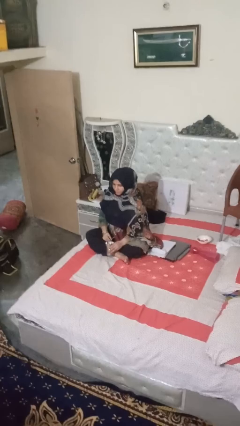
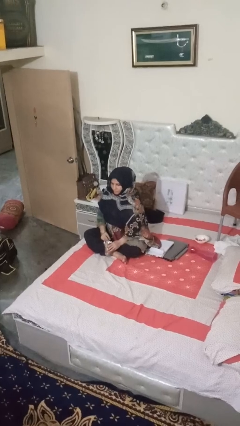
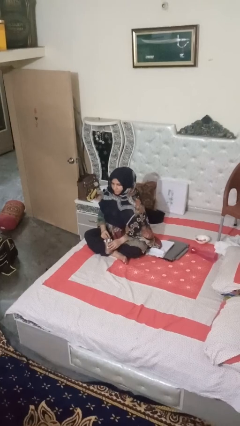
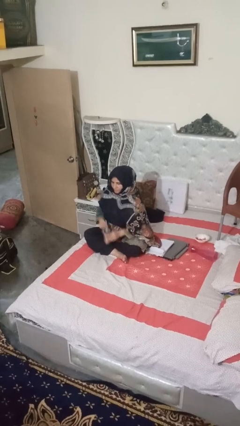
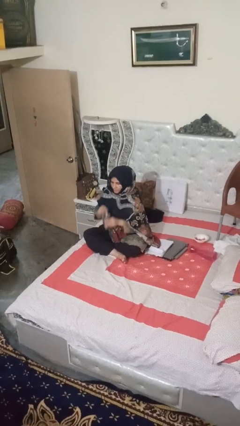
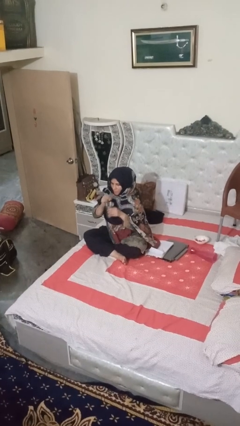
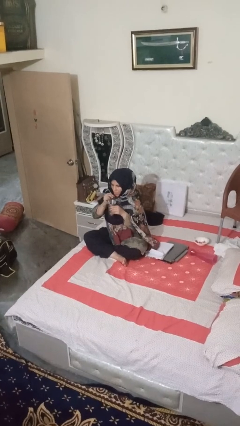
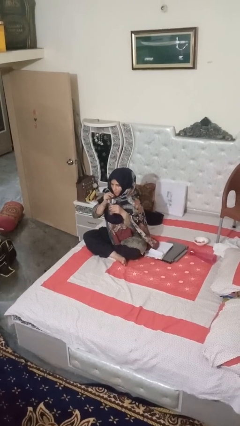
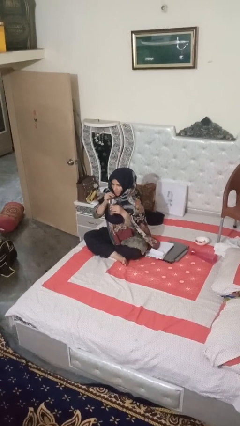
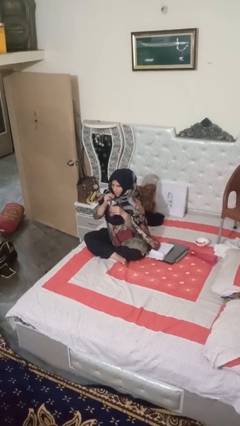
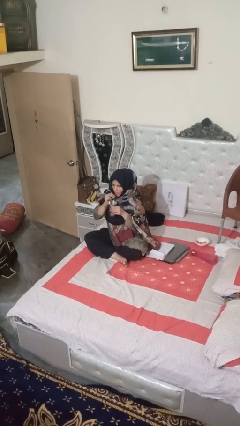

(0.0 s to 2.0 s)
person drinks from straw

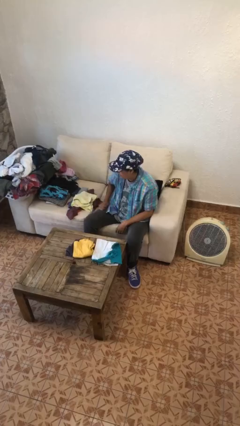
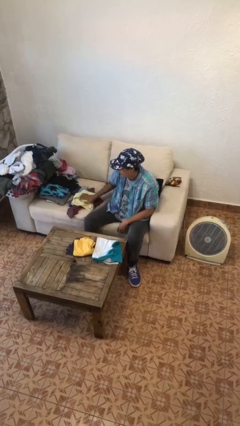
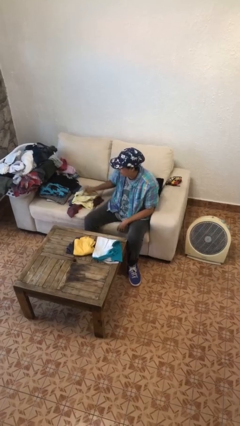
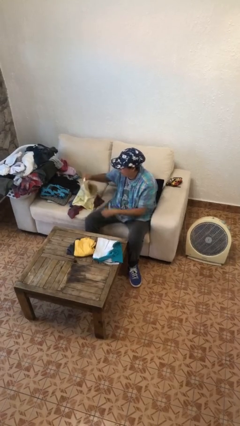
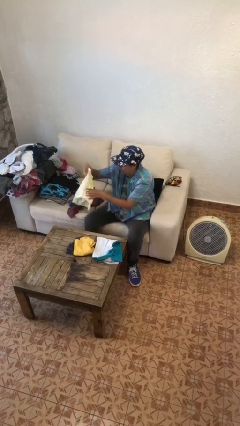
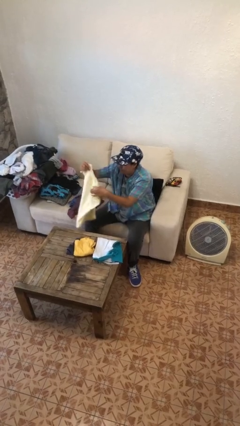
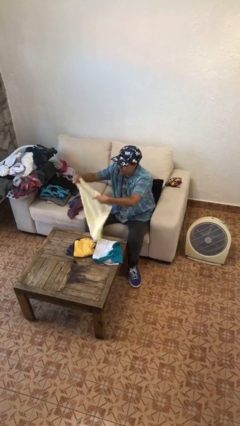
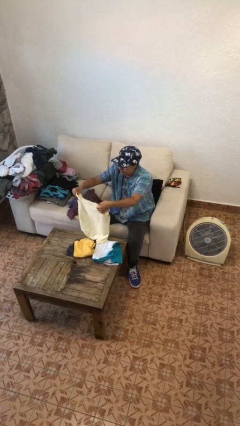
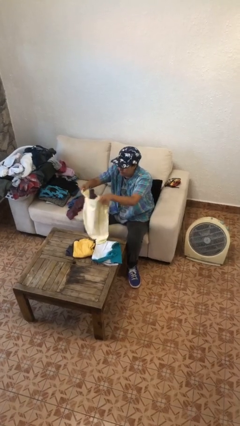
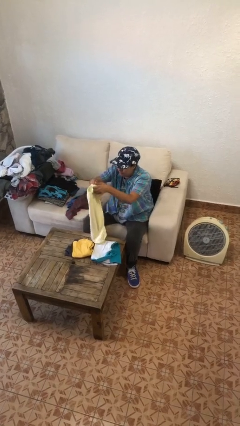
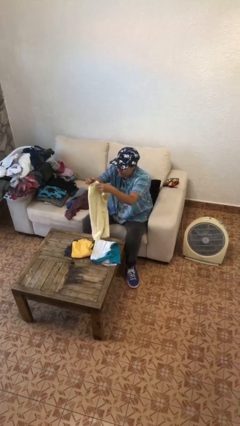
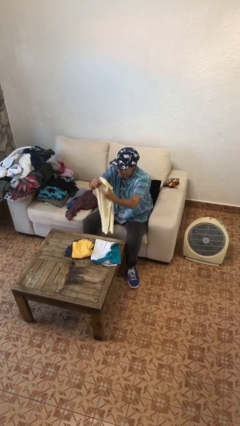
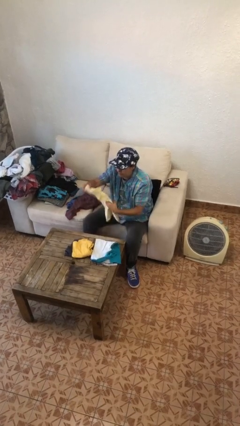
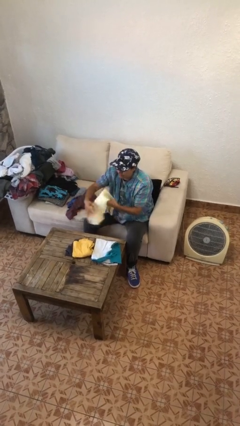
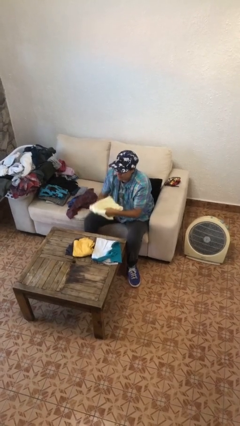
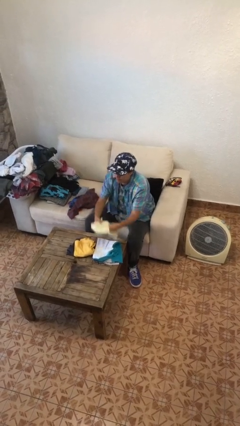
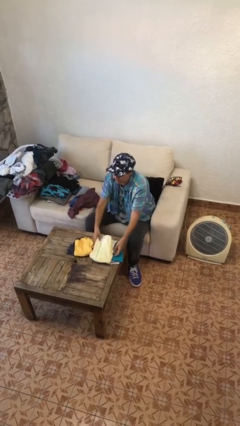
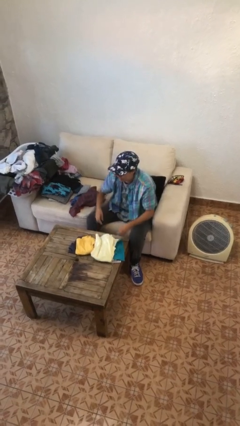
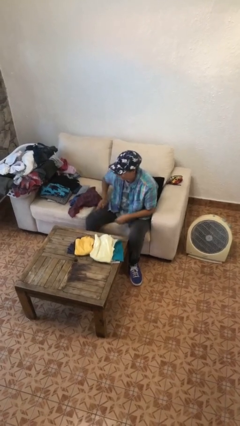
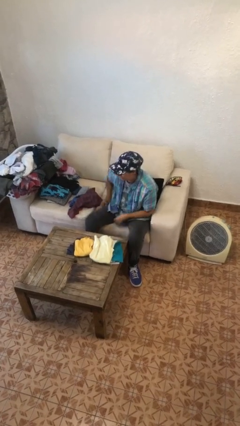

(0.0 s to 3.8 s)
person folds shirt

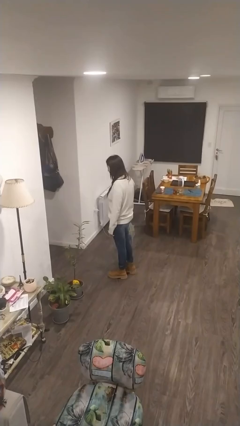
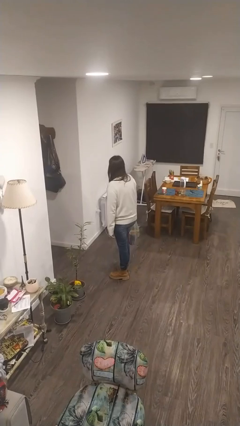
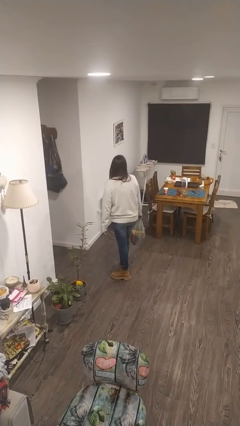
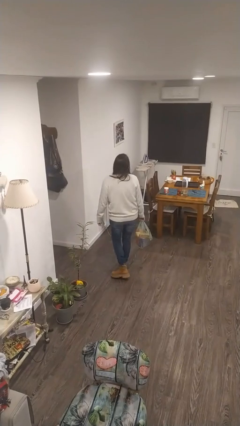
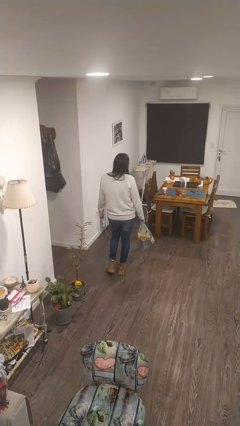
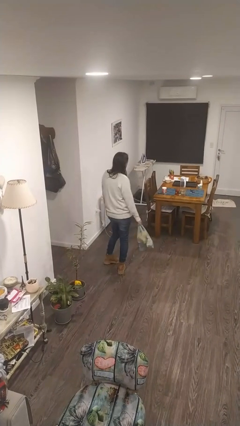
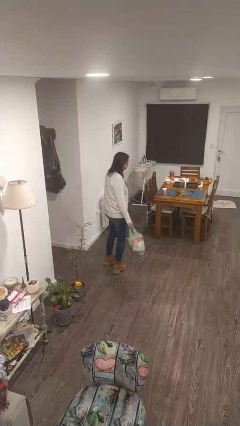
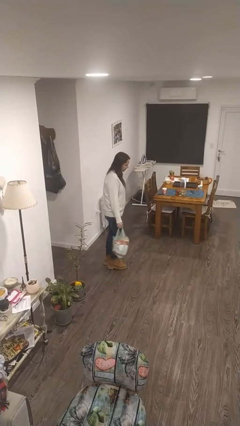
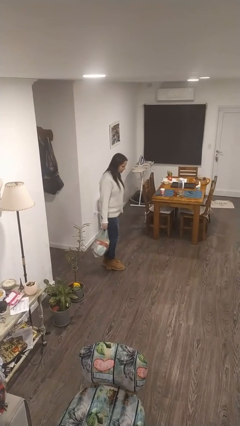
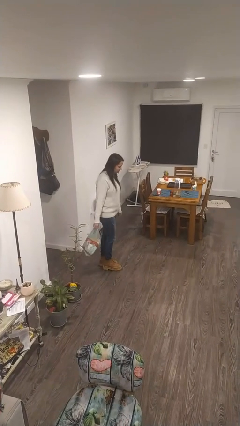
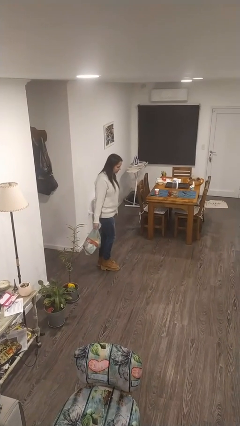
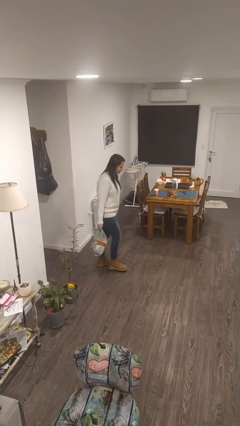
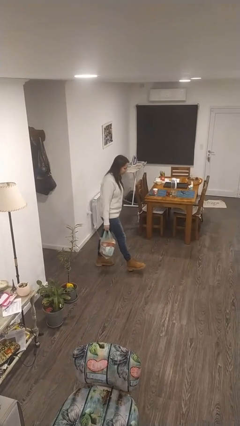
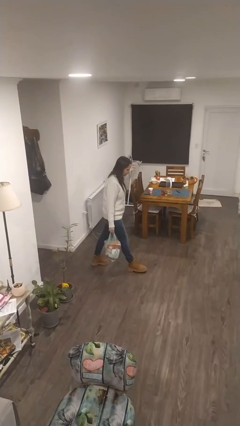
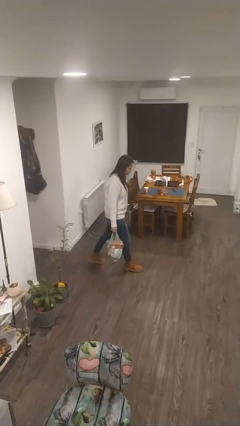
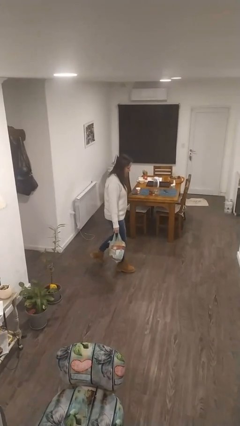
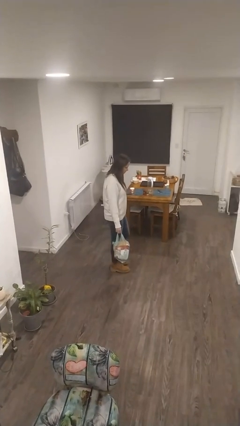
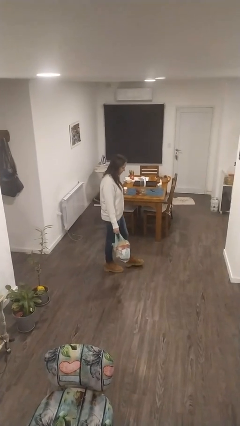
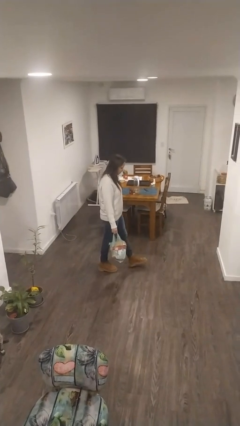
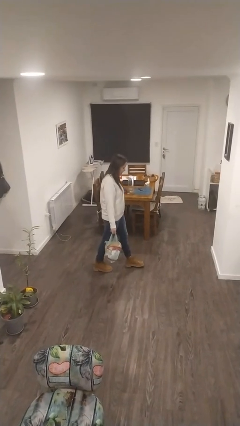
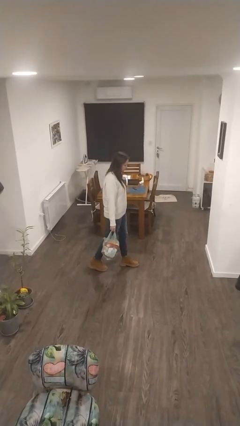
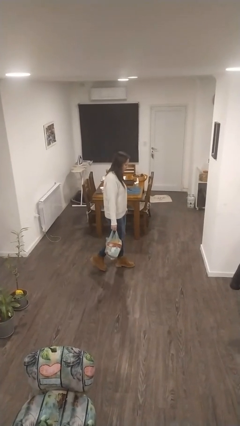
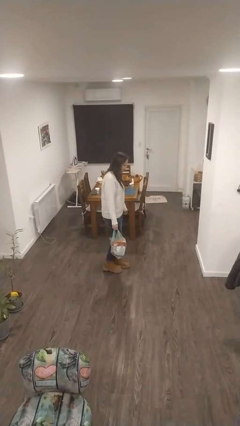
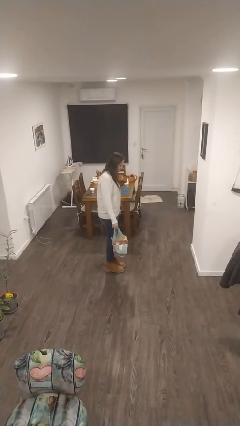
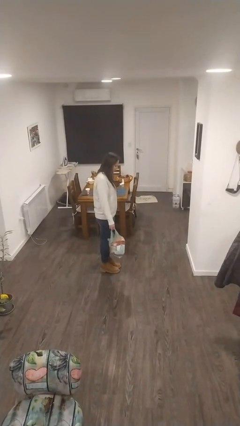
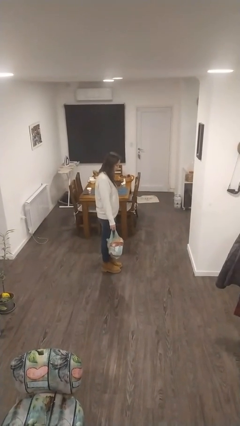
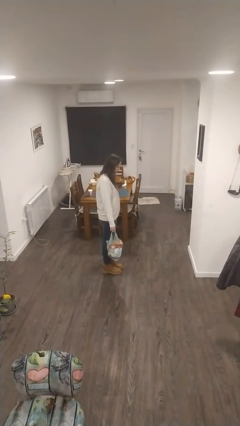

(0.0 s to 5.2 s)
person carries groceries

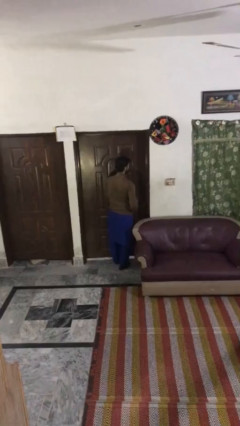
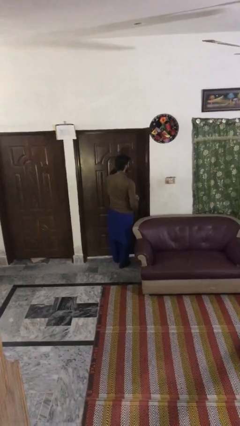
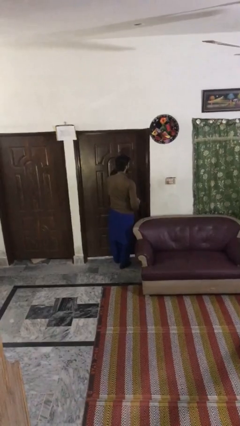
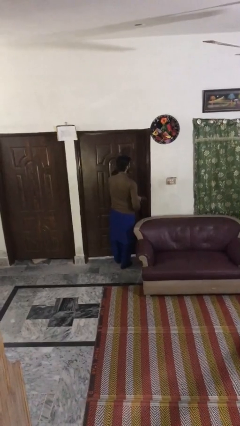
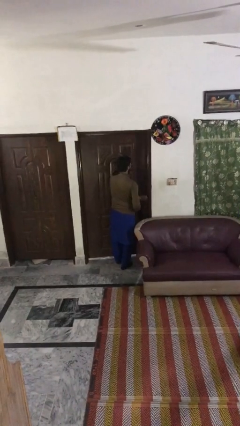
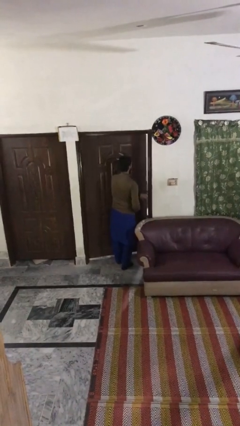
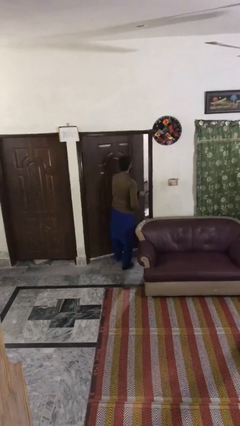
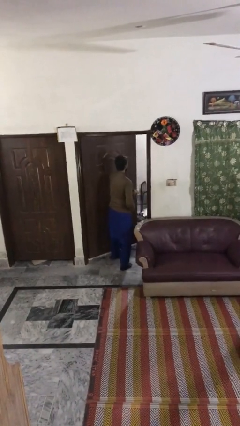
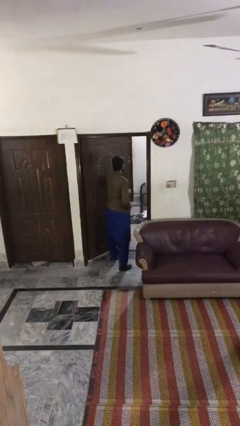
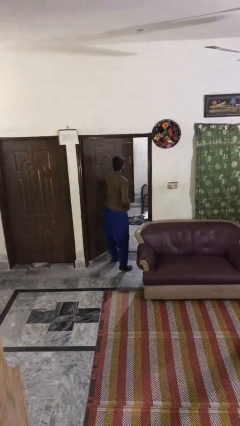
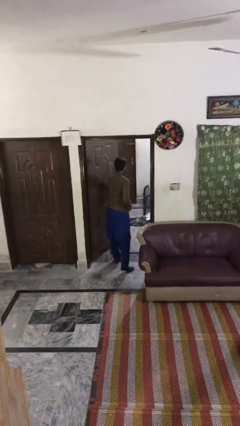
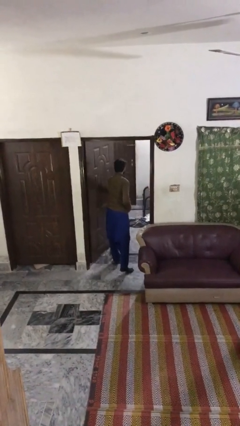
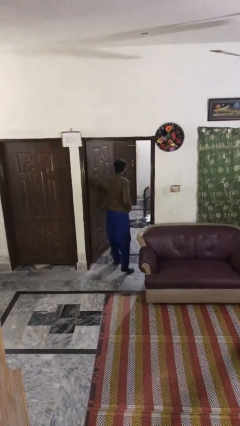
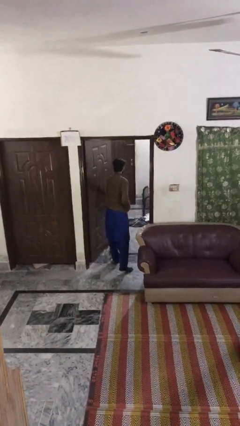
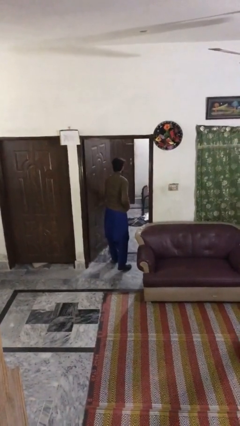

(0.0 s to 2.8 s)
person opens facility door

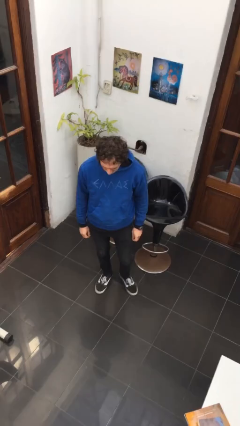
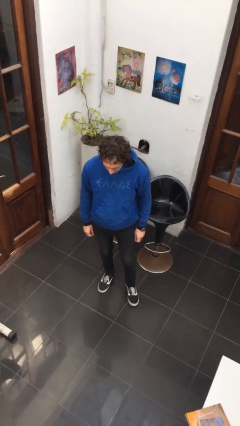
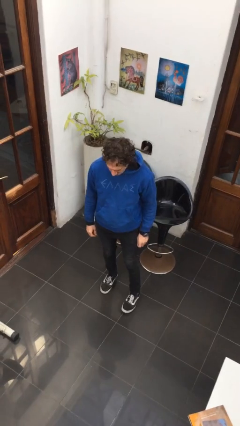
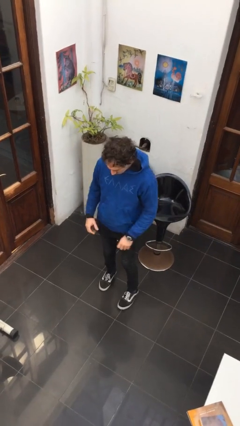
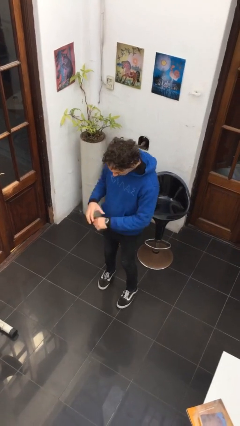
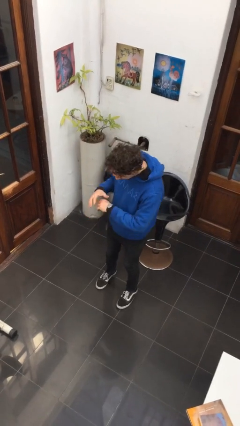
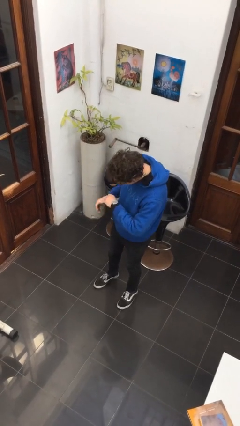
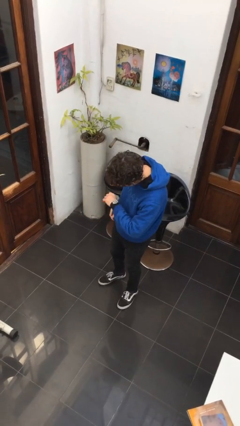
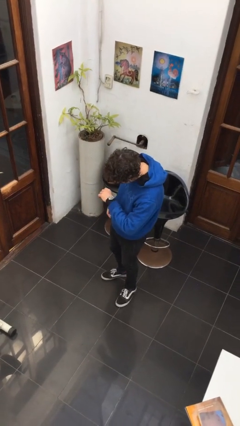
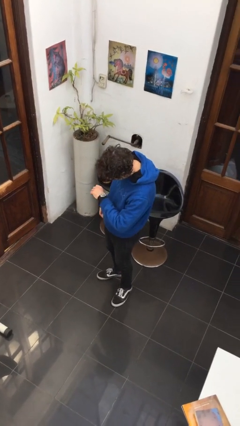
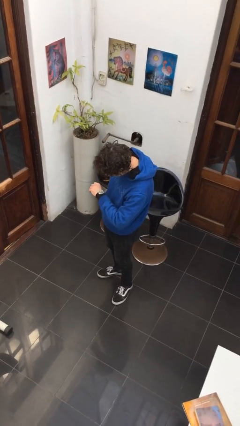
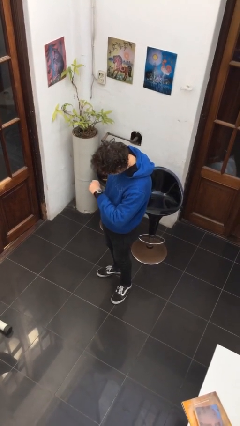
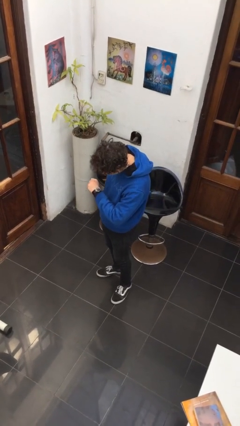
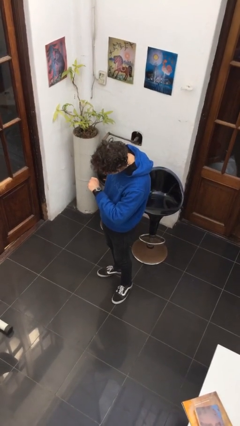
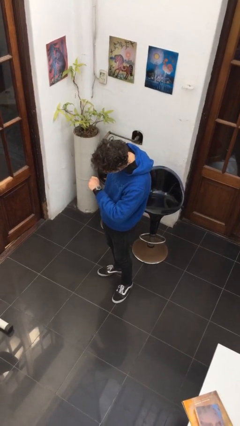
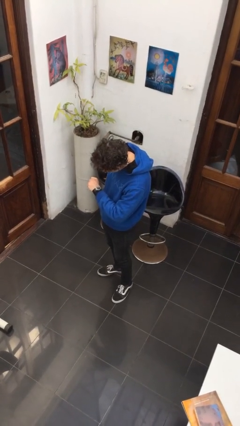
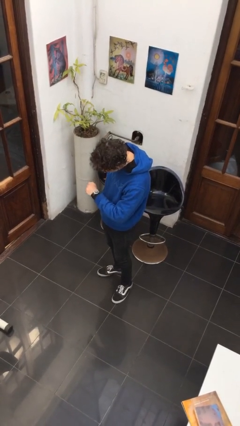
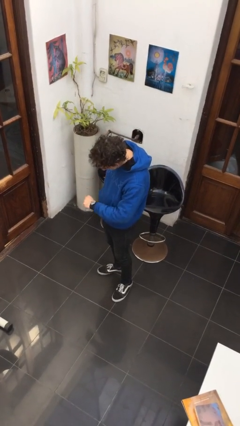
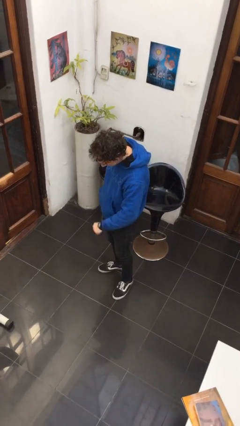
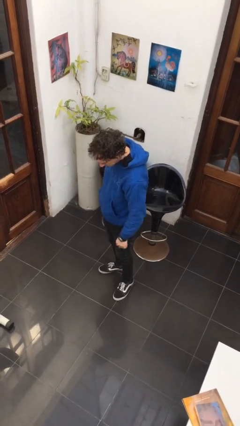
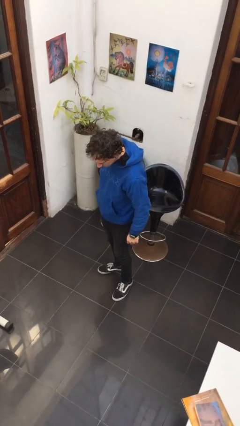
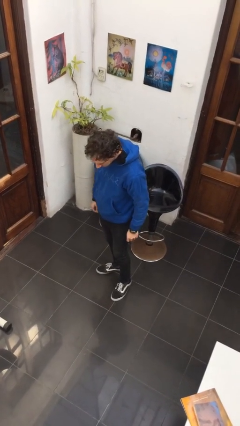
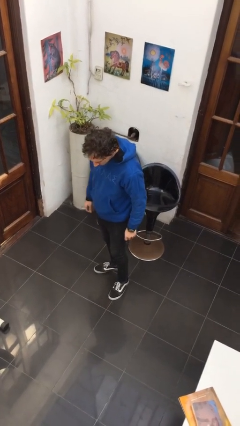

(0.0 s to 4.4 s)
person looks at wristwatch
